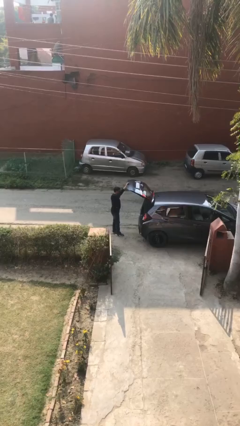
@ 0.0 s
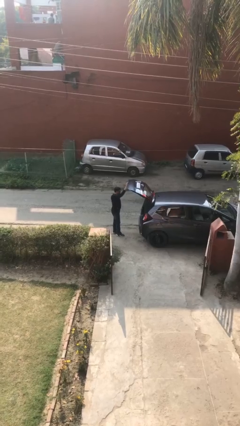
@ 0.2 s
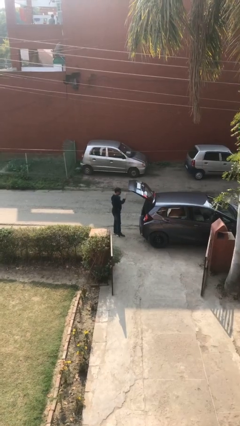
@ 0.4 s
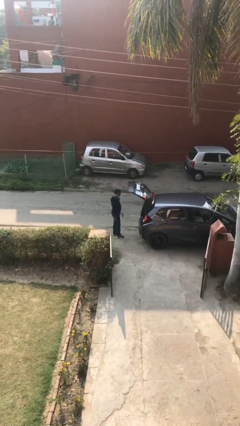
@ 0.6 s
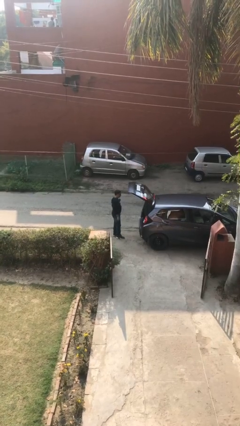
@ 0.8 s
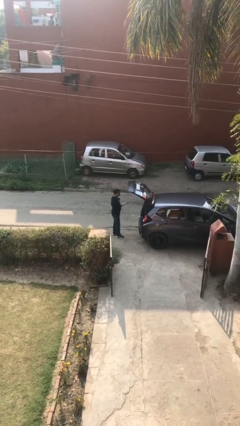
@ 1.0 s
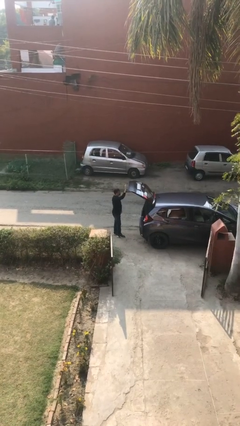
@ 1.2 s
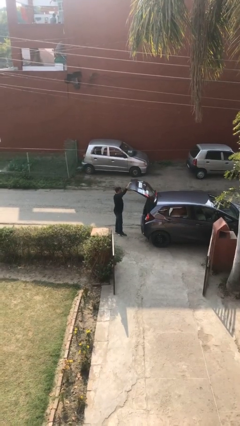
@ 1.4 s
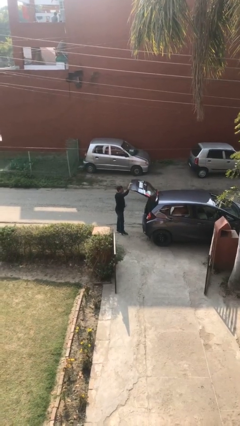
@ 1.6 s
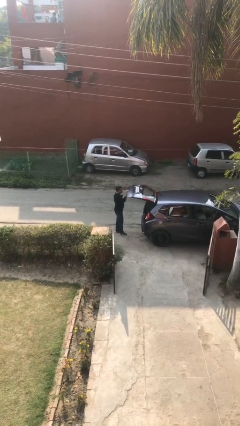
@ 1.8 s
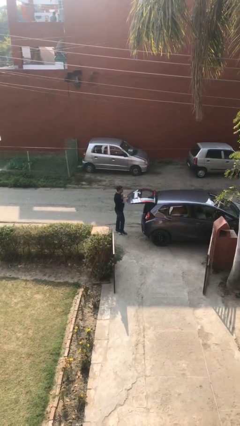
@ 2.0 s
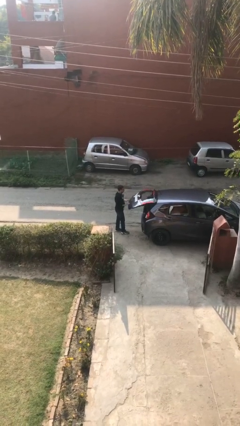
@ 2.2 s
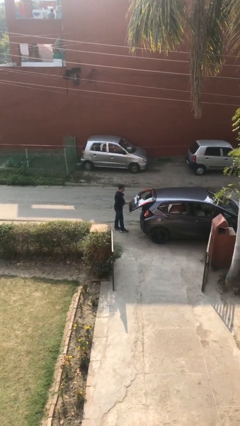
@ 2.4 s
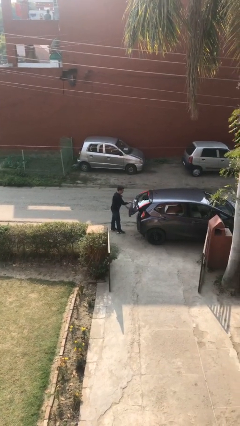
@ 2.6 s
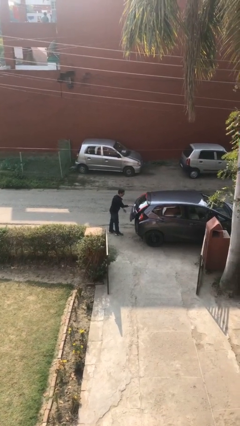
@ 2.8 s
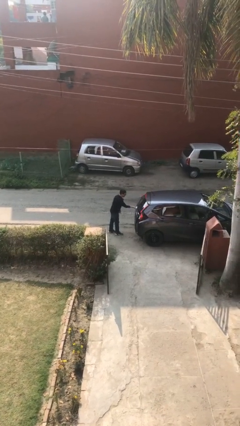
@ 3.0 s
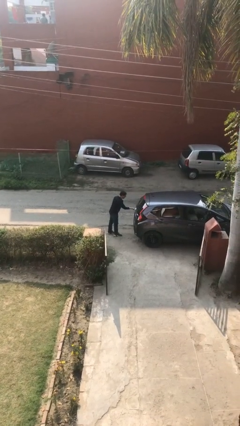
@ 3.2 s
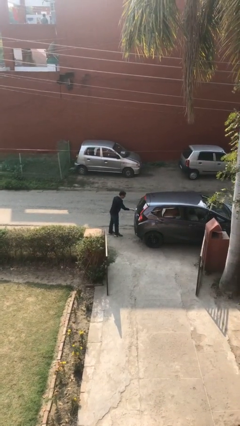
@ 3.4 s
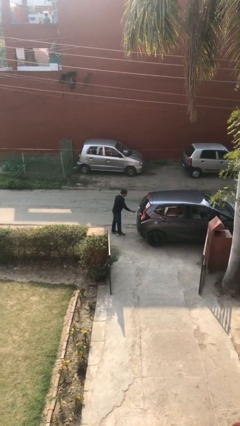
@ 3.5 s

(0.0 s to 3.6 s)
person closes car trunk

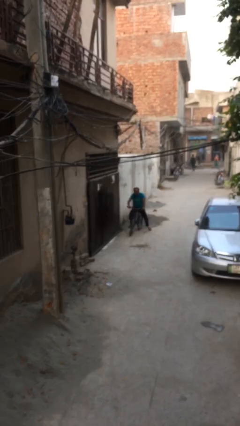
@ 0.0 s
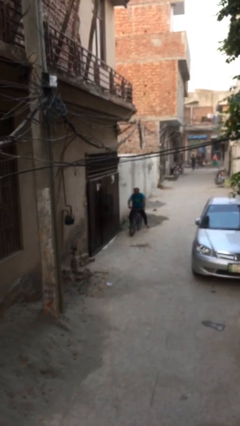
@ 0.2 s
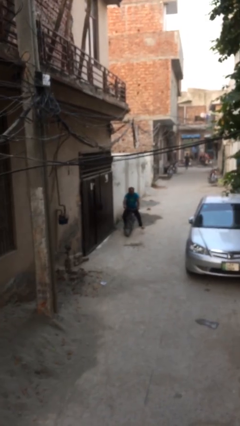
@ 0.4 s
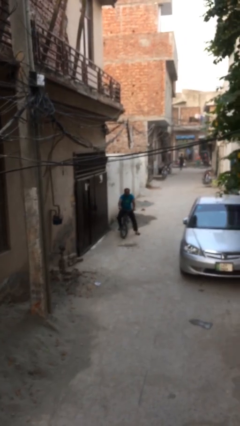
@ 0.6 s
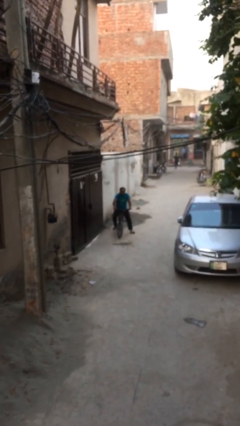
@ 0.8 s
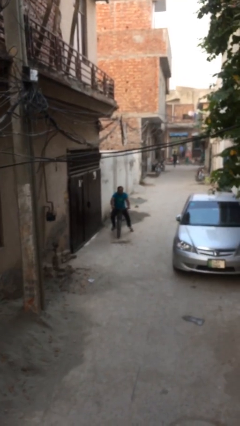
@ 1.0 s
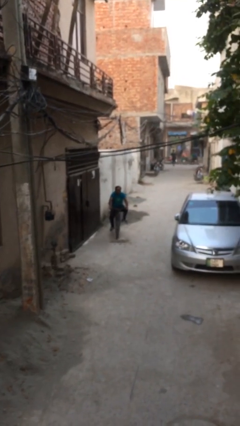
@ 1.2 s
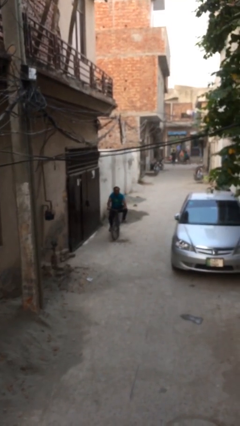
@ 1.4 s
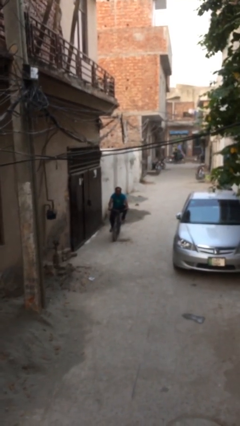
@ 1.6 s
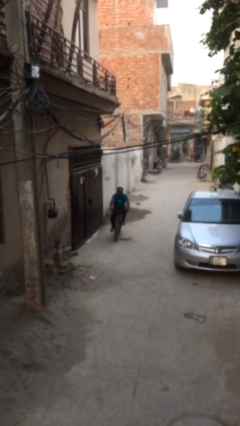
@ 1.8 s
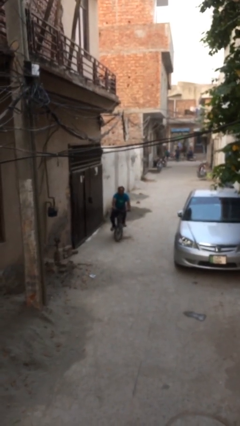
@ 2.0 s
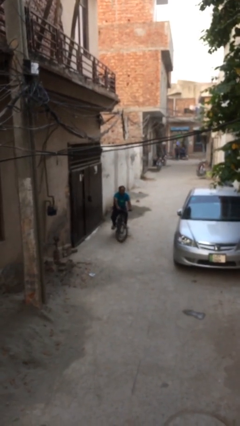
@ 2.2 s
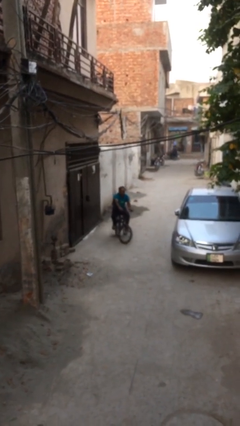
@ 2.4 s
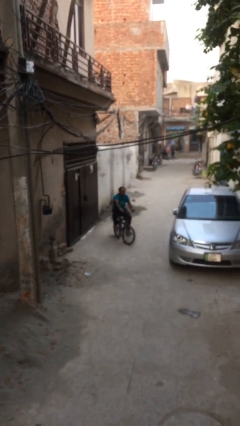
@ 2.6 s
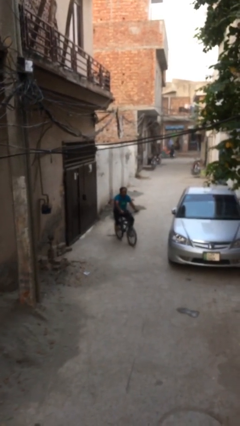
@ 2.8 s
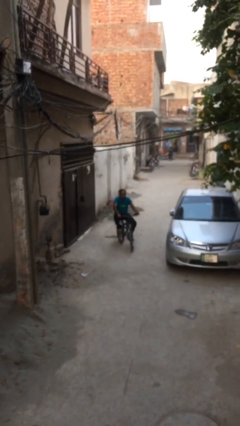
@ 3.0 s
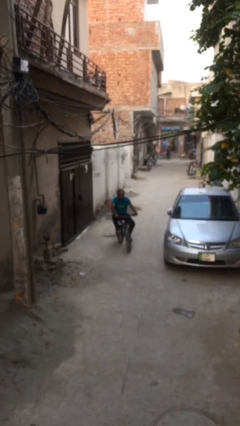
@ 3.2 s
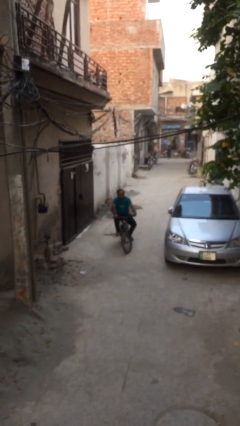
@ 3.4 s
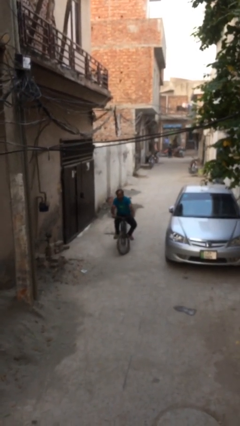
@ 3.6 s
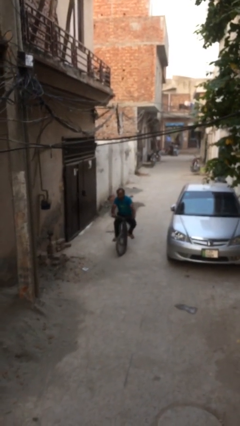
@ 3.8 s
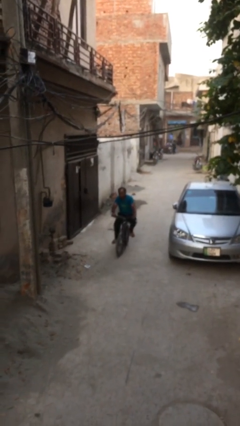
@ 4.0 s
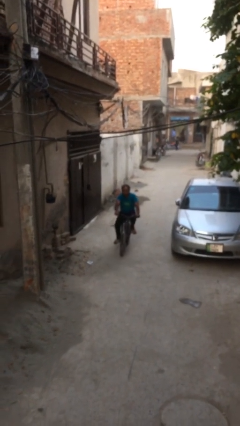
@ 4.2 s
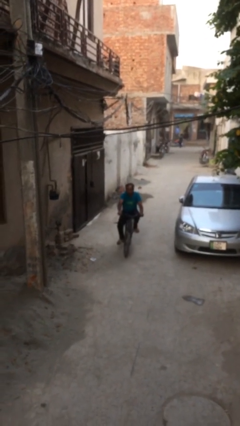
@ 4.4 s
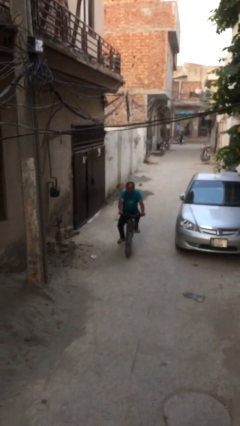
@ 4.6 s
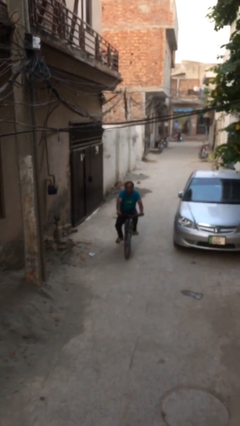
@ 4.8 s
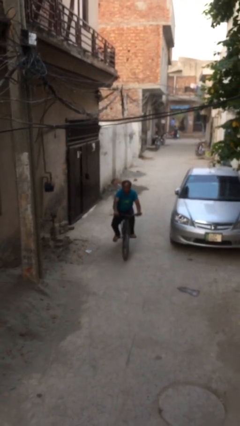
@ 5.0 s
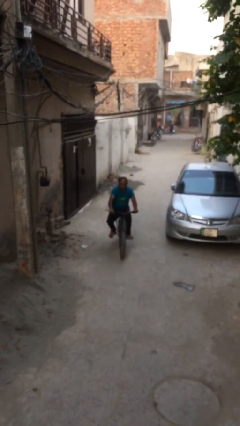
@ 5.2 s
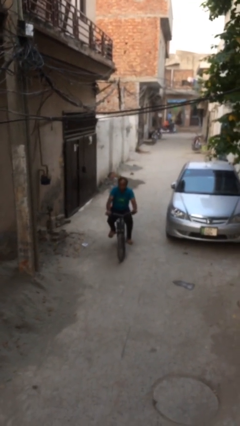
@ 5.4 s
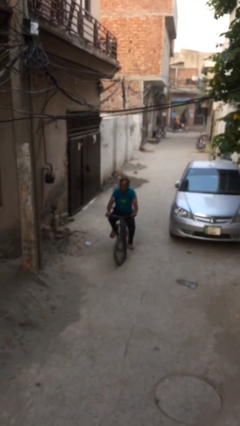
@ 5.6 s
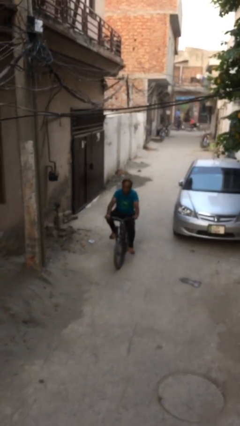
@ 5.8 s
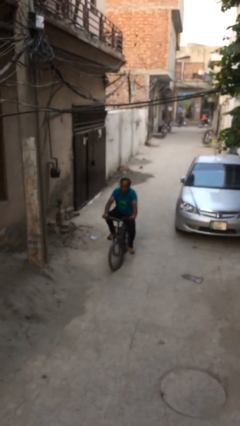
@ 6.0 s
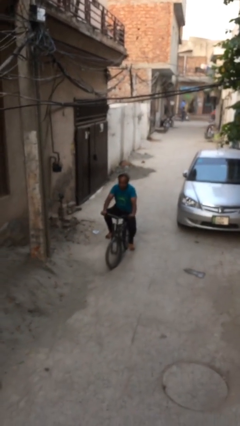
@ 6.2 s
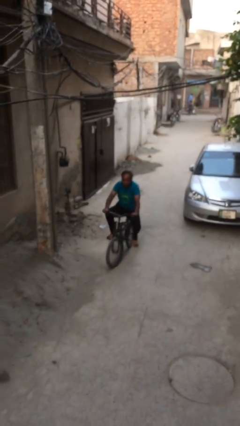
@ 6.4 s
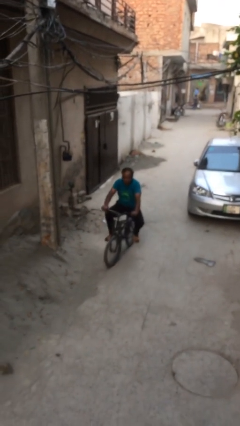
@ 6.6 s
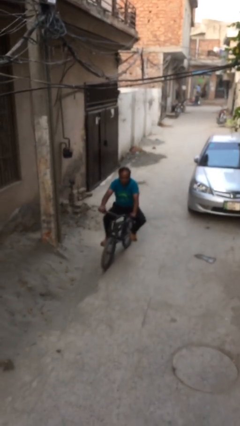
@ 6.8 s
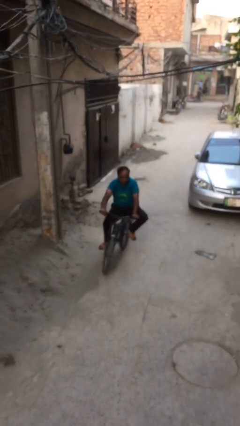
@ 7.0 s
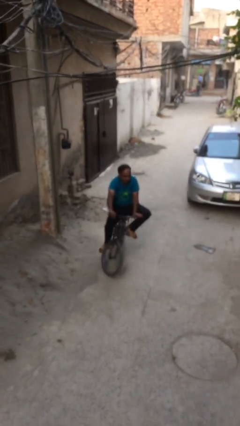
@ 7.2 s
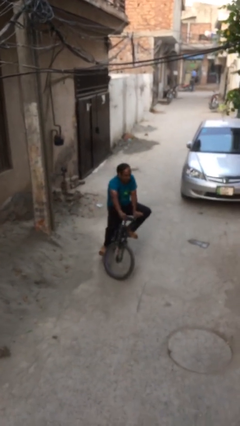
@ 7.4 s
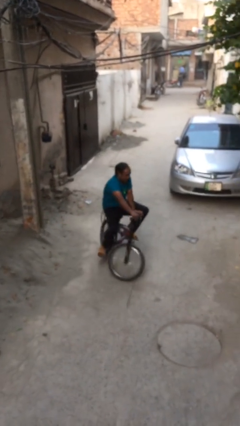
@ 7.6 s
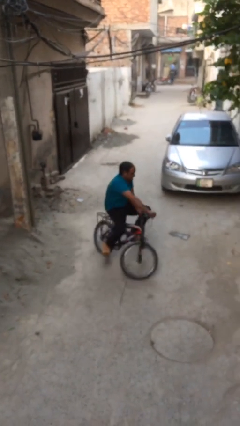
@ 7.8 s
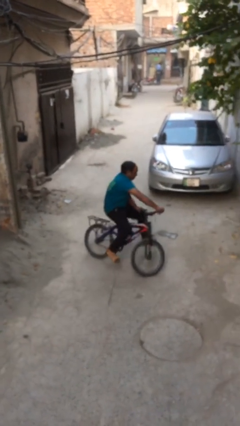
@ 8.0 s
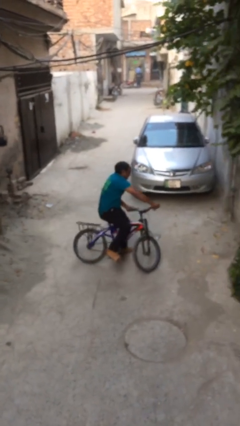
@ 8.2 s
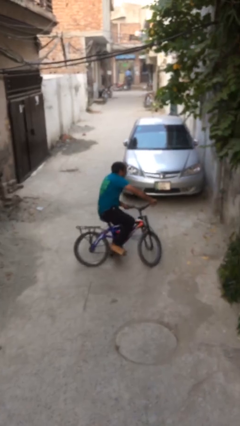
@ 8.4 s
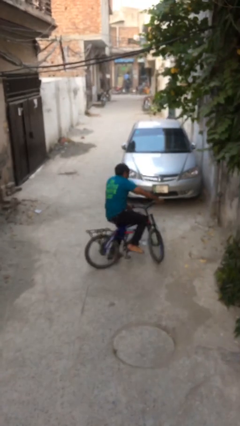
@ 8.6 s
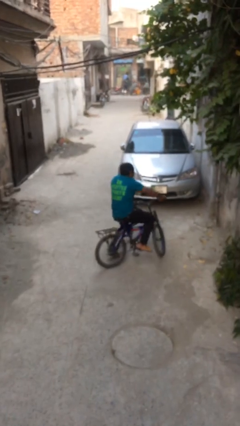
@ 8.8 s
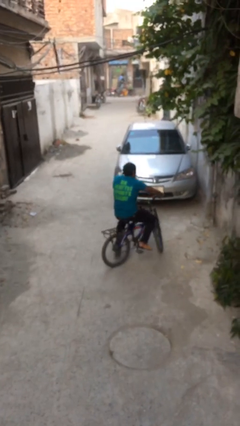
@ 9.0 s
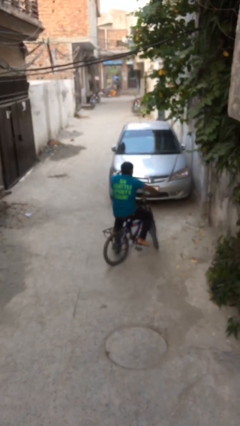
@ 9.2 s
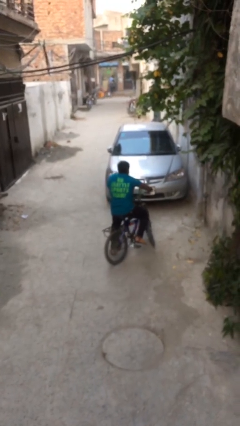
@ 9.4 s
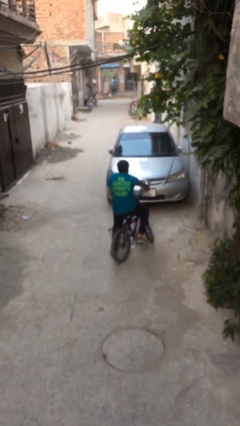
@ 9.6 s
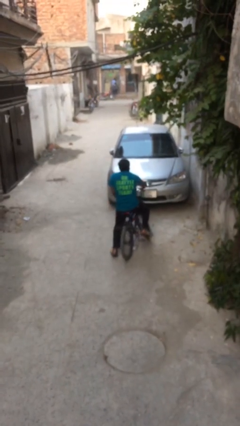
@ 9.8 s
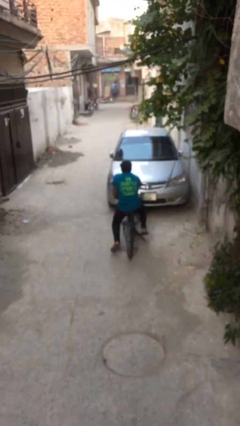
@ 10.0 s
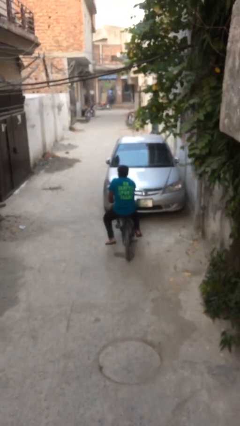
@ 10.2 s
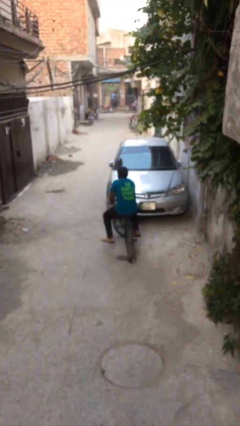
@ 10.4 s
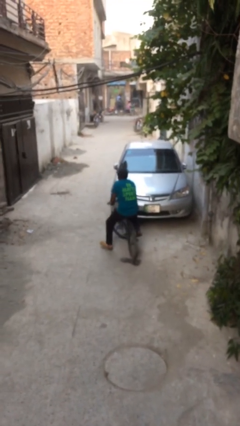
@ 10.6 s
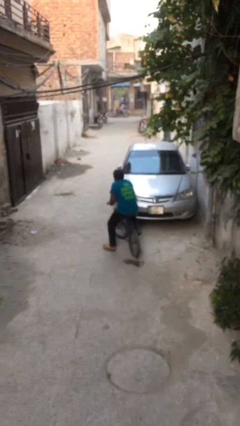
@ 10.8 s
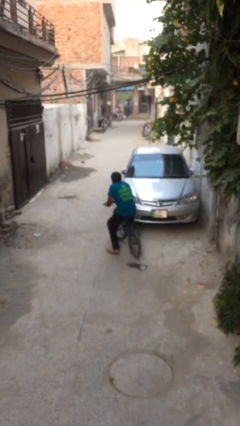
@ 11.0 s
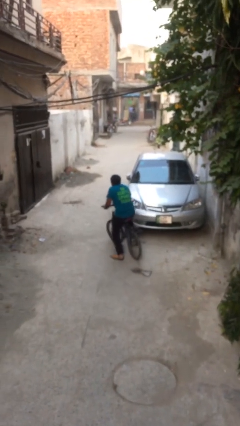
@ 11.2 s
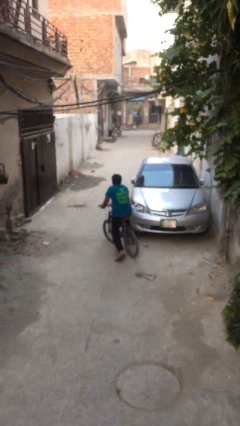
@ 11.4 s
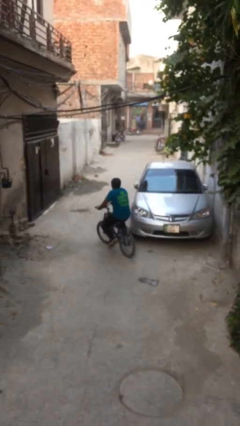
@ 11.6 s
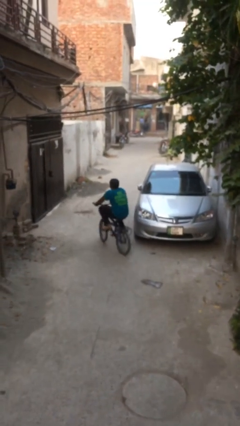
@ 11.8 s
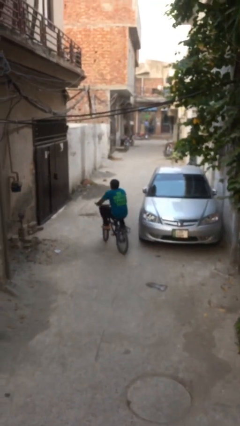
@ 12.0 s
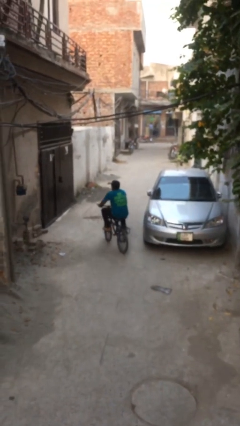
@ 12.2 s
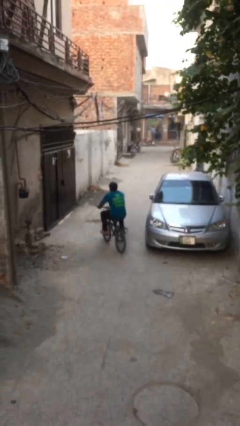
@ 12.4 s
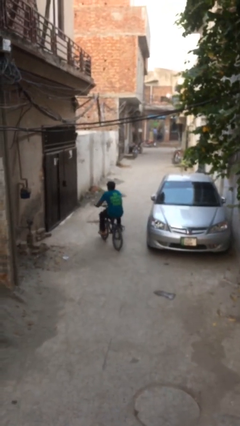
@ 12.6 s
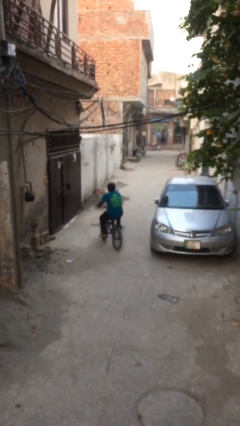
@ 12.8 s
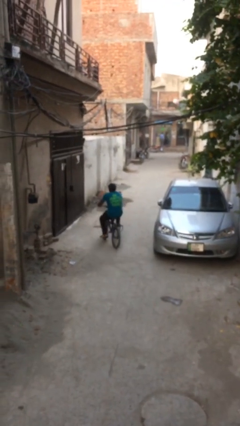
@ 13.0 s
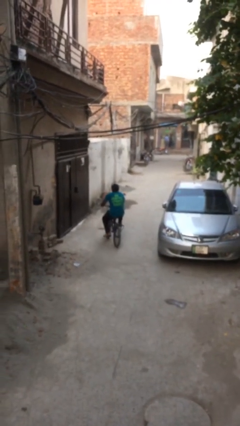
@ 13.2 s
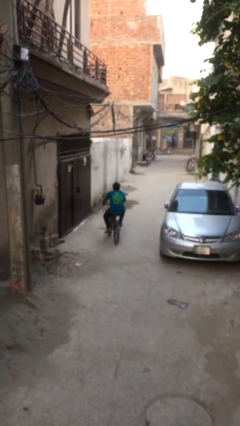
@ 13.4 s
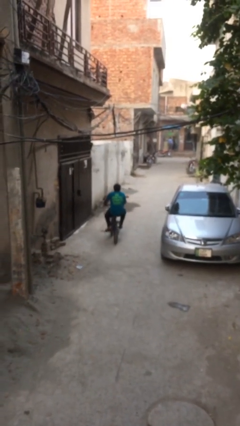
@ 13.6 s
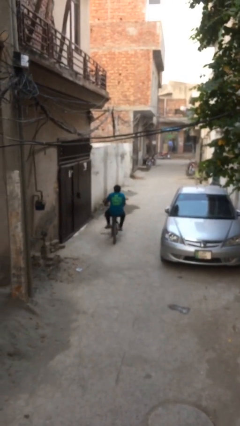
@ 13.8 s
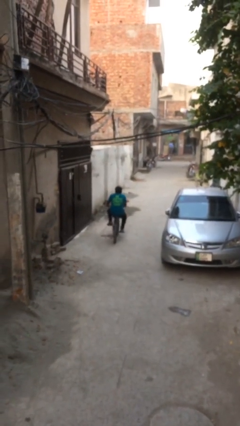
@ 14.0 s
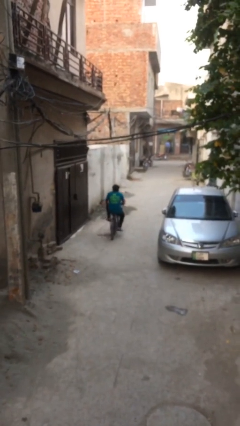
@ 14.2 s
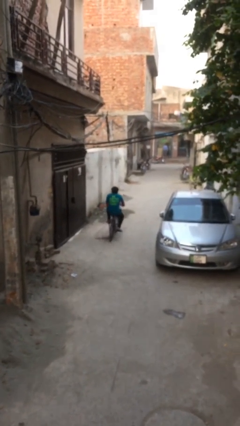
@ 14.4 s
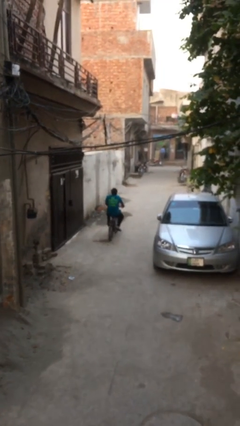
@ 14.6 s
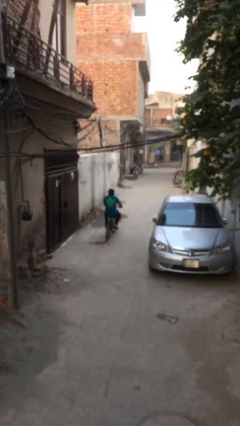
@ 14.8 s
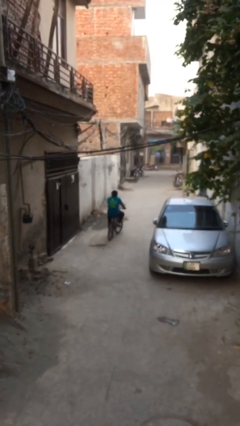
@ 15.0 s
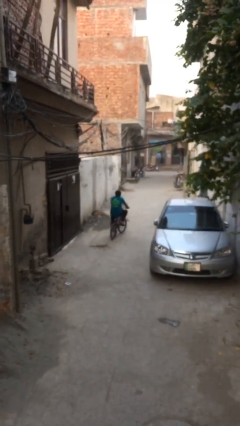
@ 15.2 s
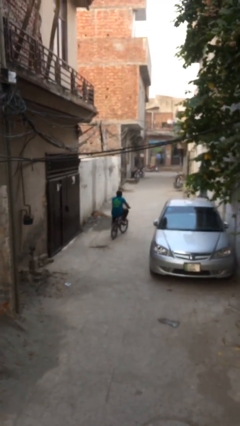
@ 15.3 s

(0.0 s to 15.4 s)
person rides bicycle
